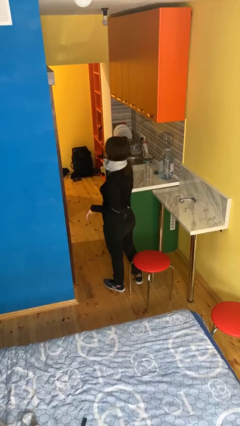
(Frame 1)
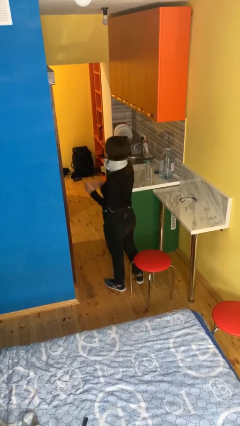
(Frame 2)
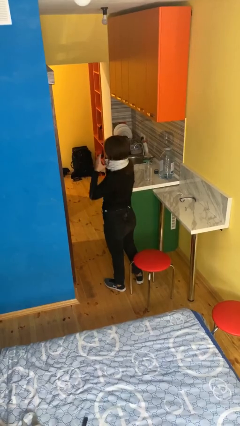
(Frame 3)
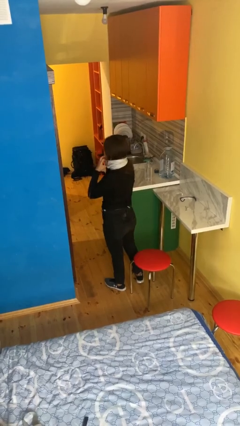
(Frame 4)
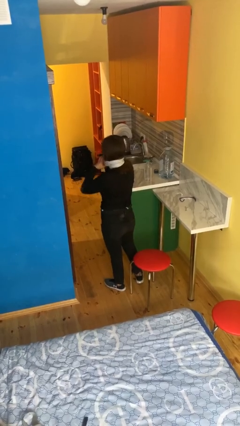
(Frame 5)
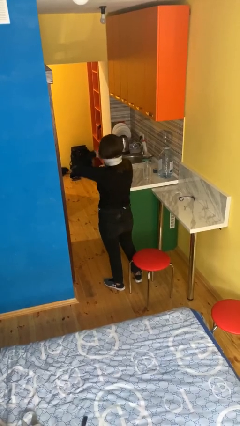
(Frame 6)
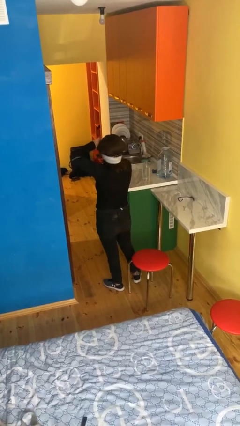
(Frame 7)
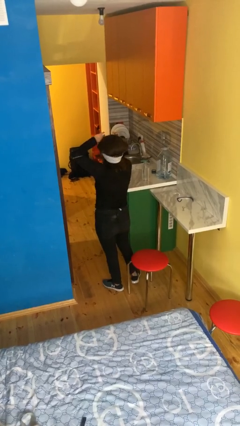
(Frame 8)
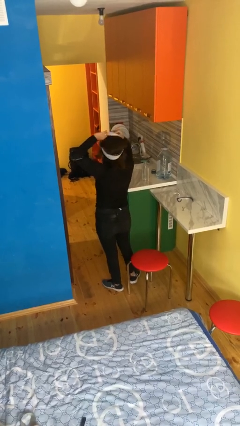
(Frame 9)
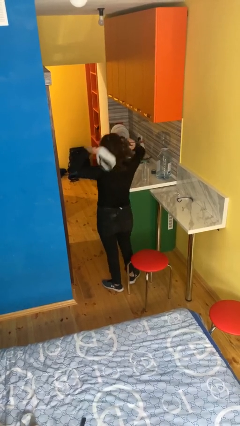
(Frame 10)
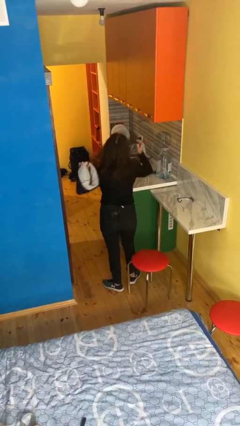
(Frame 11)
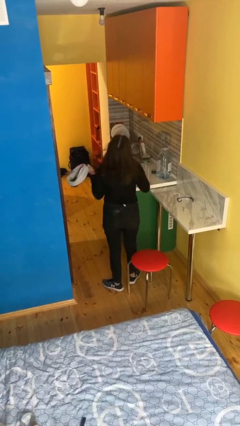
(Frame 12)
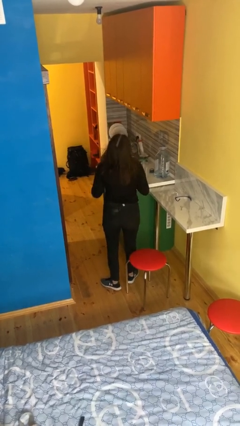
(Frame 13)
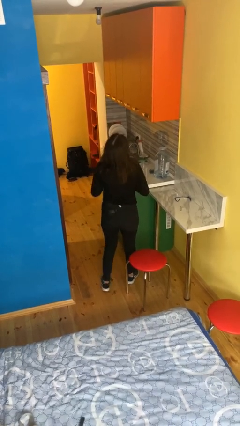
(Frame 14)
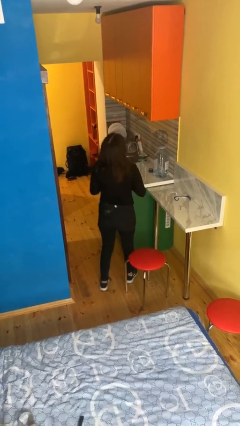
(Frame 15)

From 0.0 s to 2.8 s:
person takes off scarf

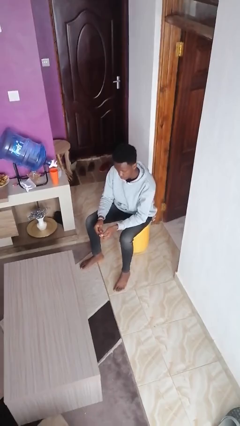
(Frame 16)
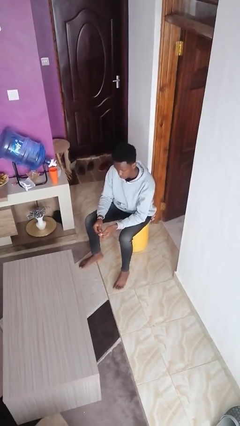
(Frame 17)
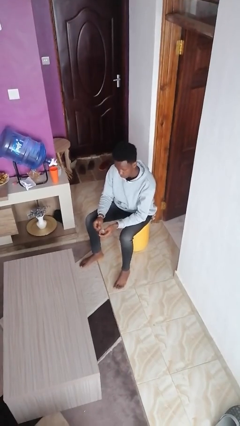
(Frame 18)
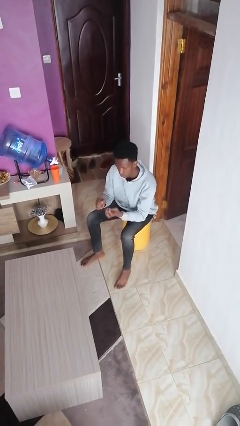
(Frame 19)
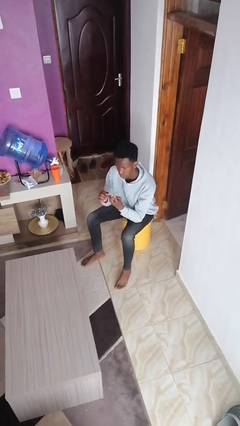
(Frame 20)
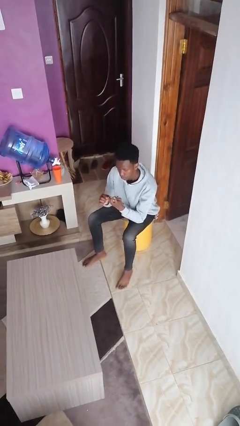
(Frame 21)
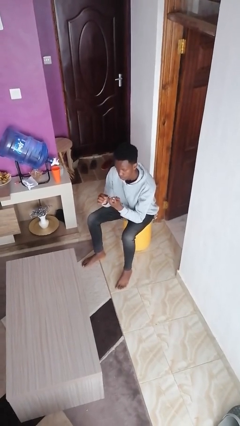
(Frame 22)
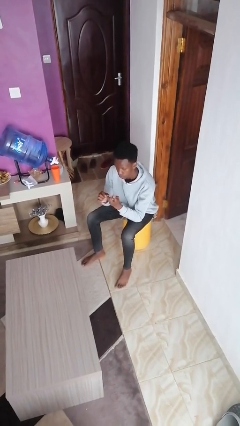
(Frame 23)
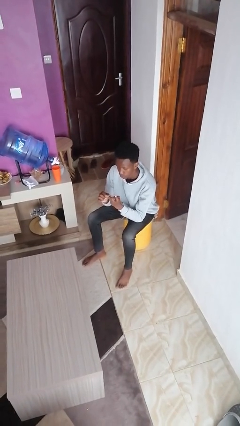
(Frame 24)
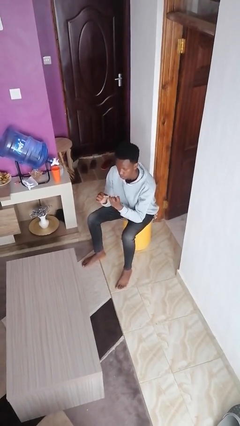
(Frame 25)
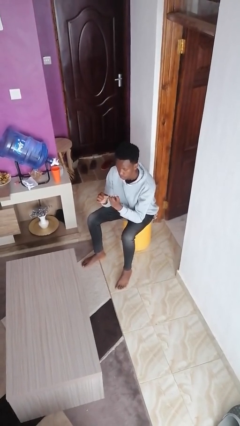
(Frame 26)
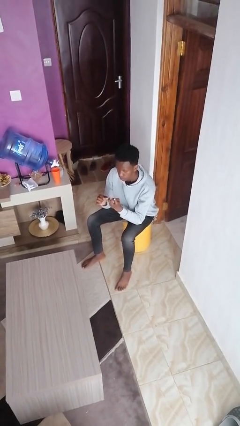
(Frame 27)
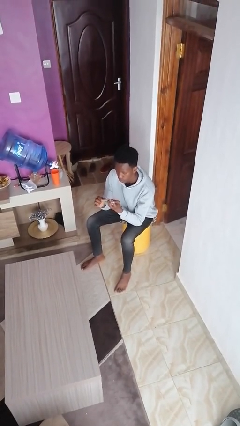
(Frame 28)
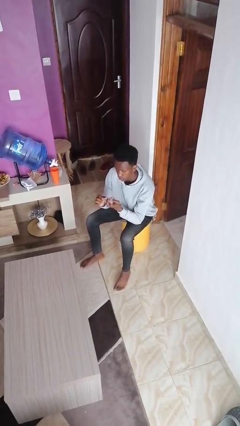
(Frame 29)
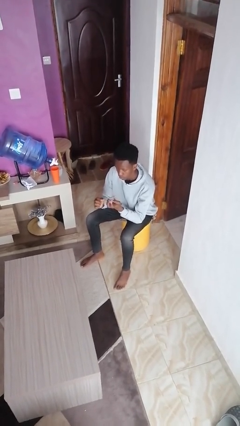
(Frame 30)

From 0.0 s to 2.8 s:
person files fingernails

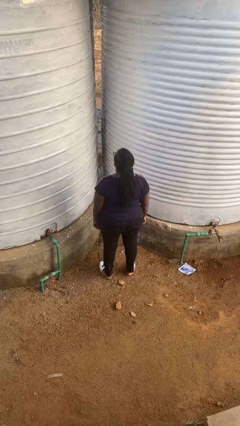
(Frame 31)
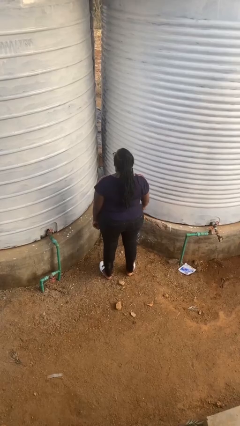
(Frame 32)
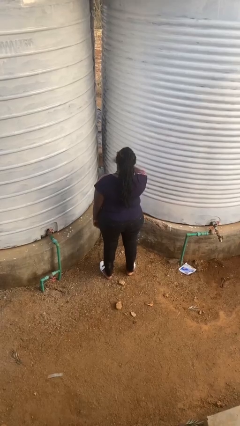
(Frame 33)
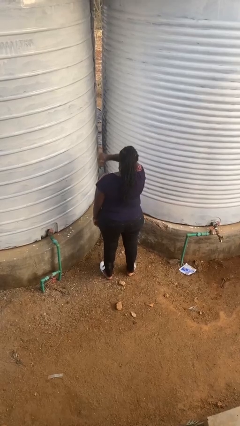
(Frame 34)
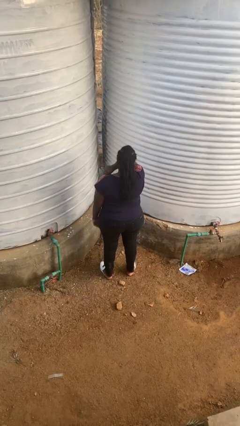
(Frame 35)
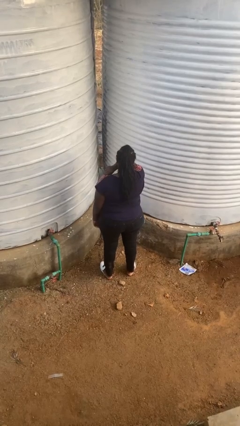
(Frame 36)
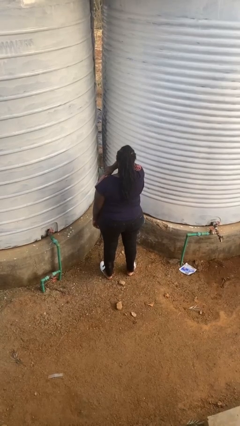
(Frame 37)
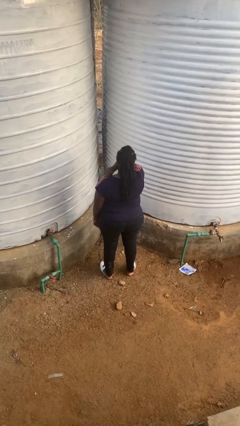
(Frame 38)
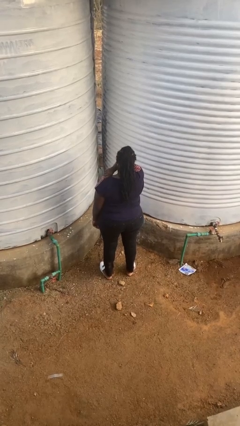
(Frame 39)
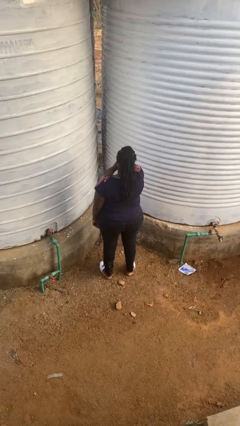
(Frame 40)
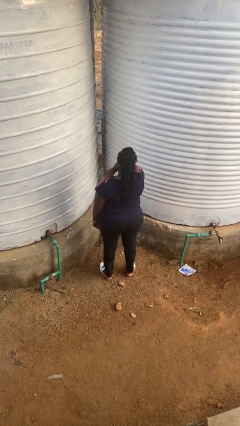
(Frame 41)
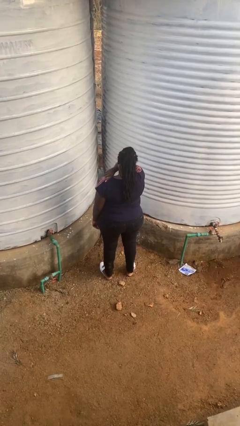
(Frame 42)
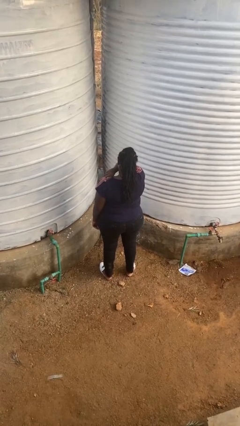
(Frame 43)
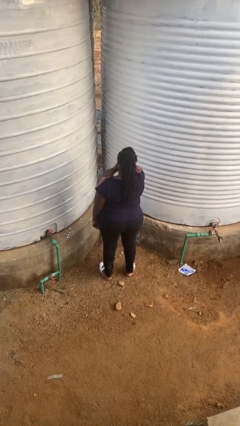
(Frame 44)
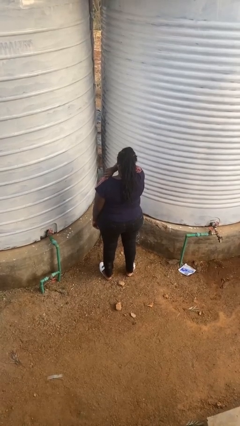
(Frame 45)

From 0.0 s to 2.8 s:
person sneezes into arm

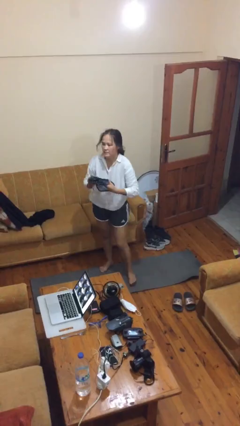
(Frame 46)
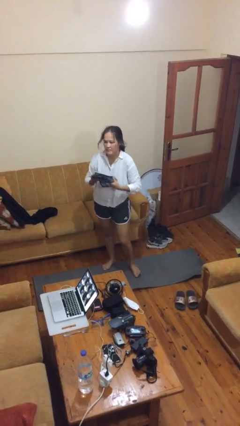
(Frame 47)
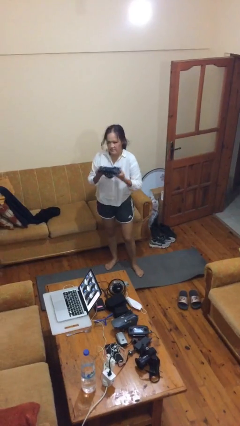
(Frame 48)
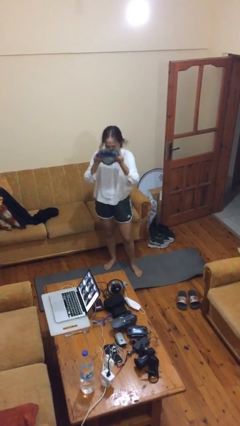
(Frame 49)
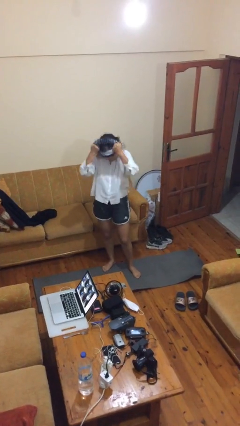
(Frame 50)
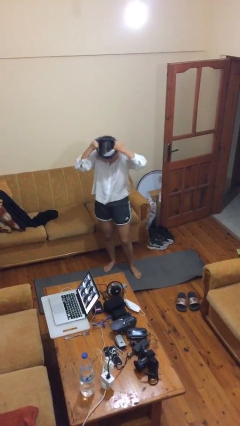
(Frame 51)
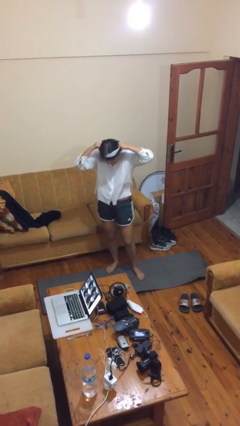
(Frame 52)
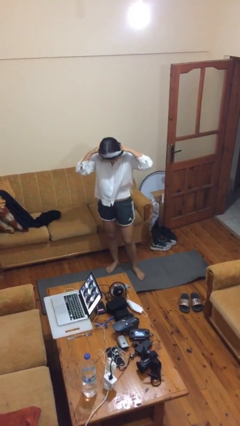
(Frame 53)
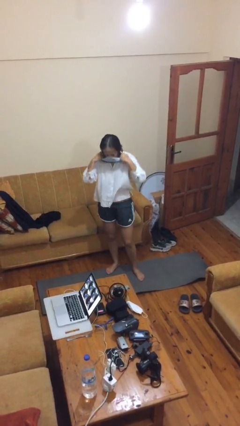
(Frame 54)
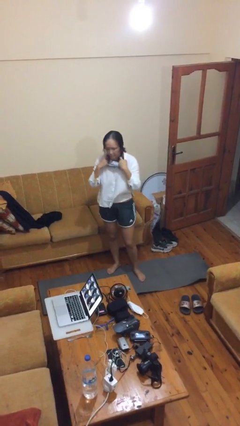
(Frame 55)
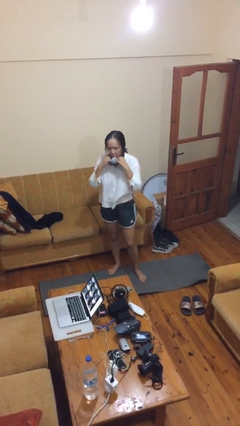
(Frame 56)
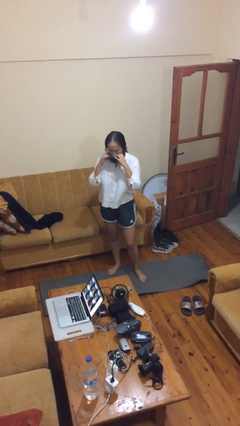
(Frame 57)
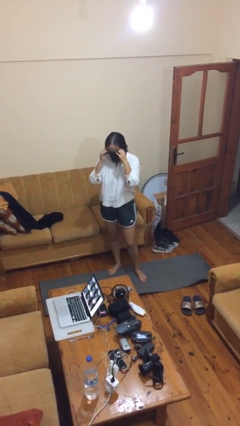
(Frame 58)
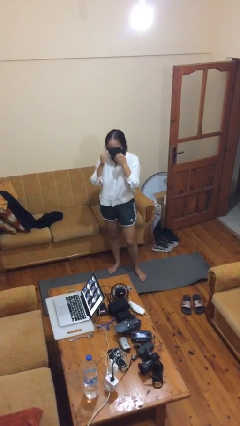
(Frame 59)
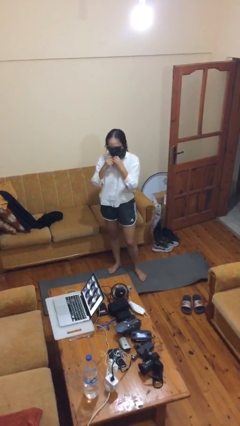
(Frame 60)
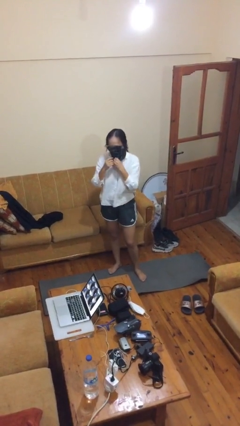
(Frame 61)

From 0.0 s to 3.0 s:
person puts on scarf

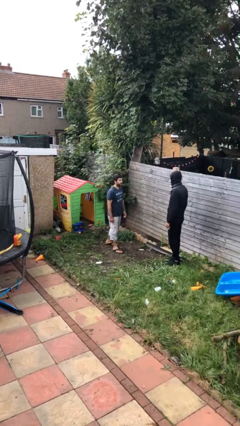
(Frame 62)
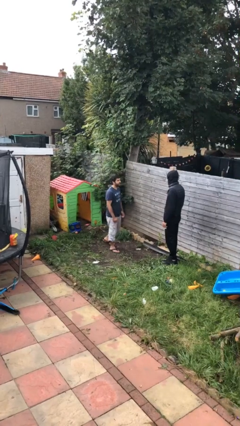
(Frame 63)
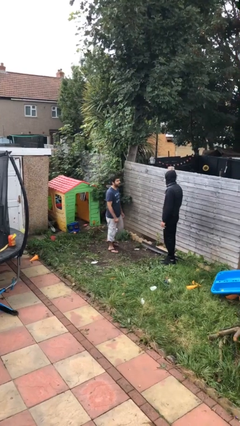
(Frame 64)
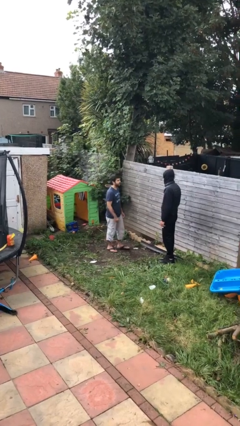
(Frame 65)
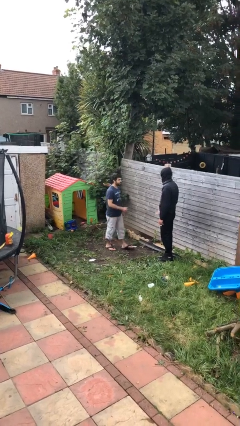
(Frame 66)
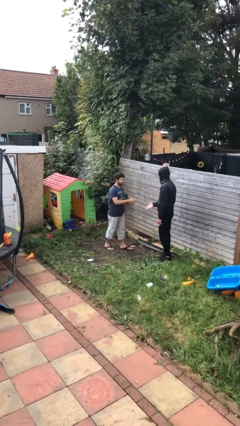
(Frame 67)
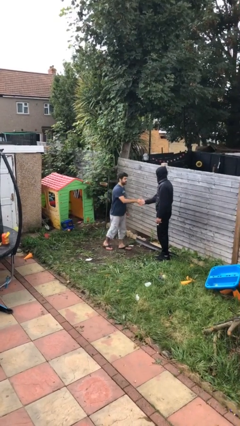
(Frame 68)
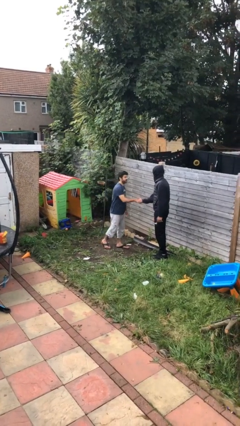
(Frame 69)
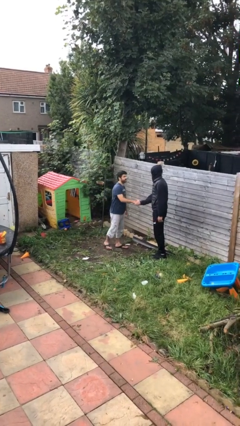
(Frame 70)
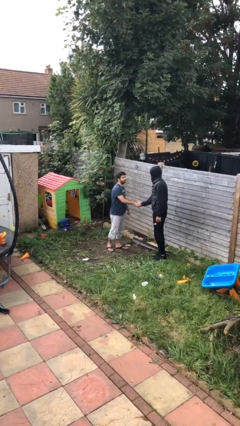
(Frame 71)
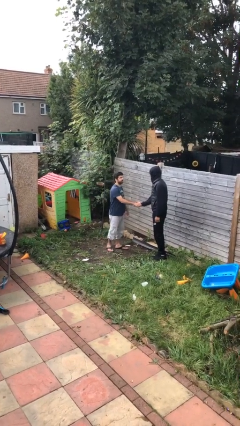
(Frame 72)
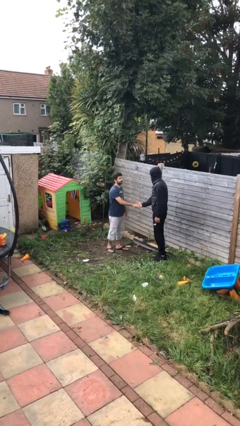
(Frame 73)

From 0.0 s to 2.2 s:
person shakes hand

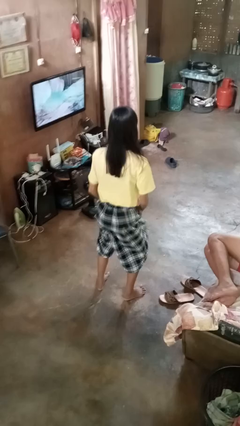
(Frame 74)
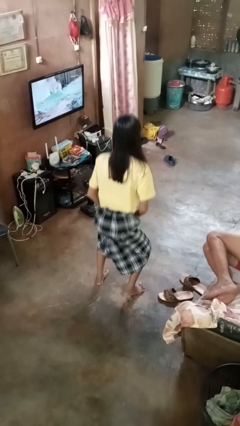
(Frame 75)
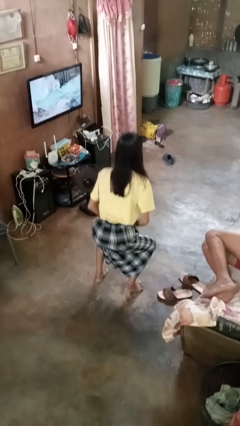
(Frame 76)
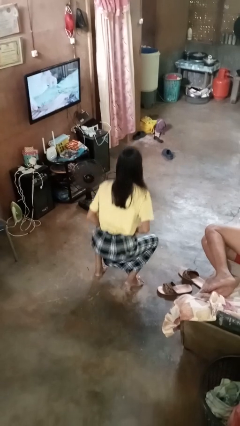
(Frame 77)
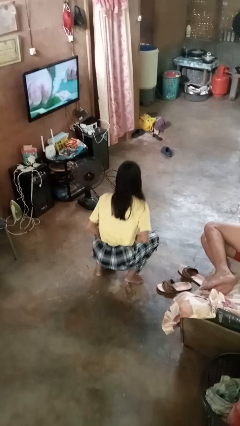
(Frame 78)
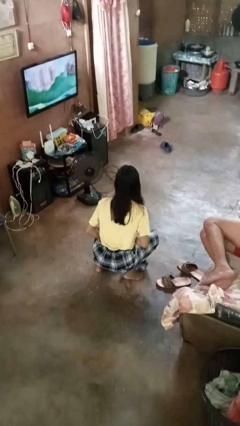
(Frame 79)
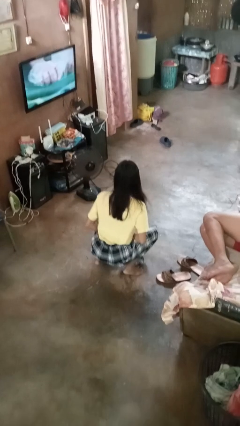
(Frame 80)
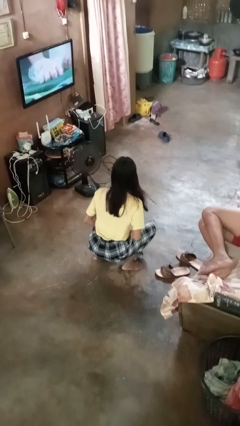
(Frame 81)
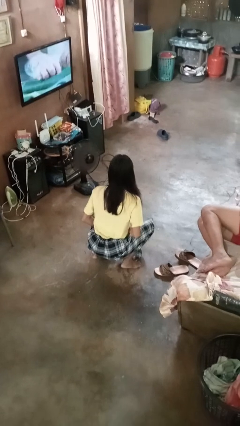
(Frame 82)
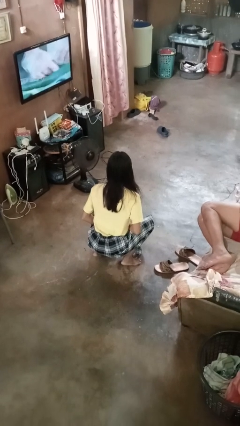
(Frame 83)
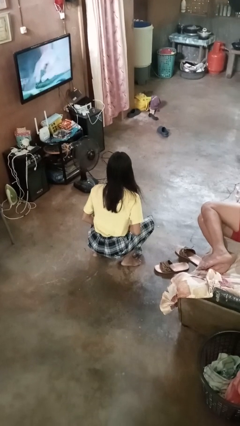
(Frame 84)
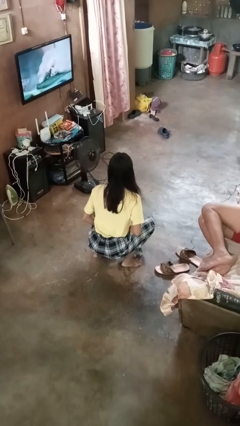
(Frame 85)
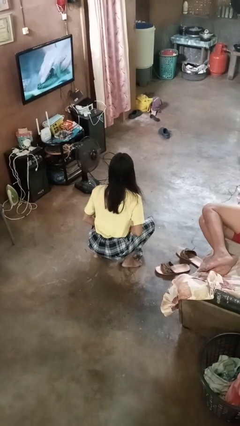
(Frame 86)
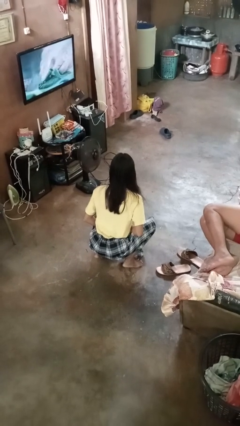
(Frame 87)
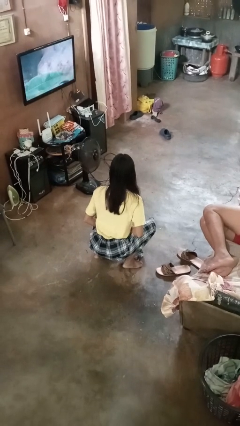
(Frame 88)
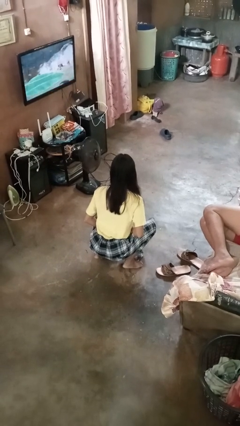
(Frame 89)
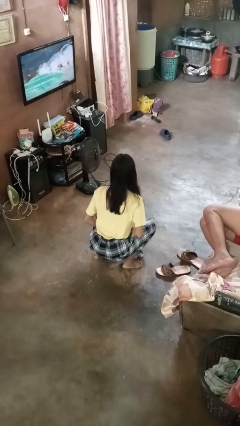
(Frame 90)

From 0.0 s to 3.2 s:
person squats

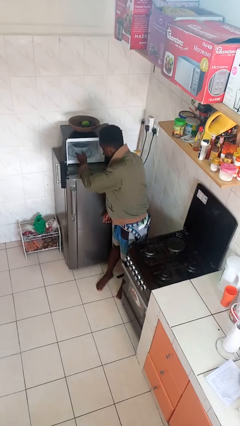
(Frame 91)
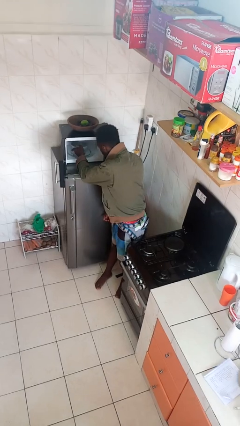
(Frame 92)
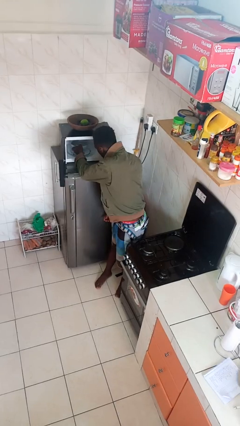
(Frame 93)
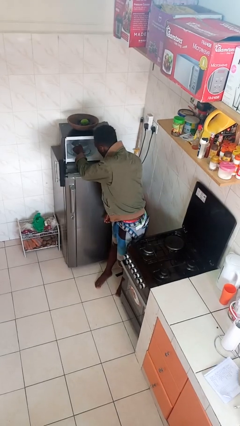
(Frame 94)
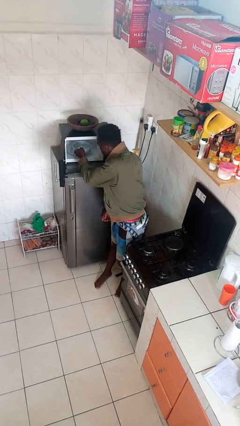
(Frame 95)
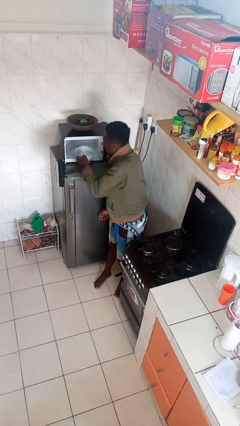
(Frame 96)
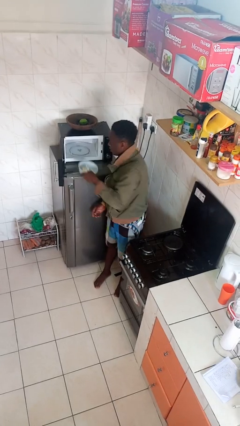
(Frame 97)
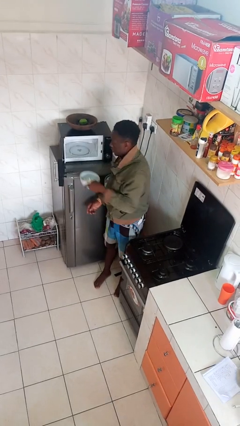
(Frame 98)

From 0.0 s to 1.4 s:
person takes object from microwave
